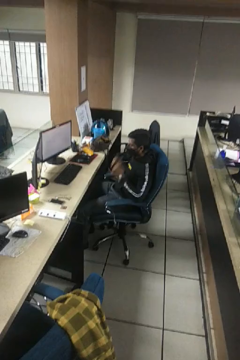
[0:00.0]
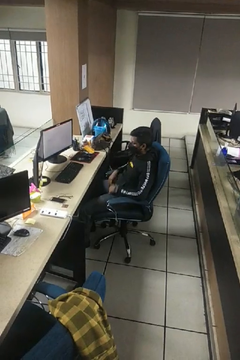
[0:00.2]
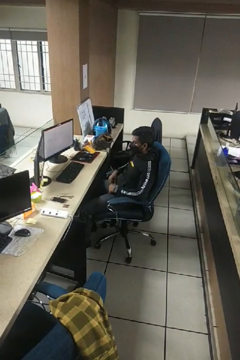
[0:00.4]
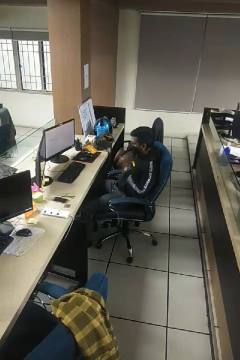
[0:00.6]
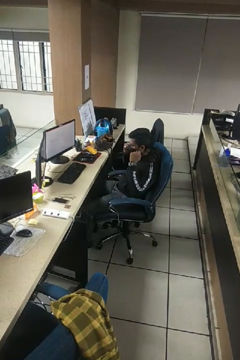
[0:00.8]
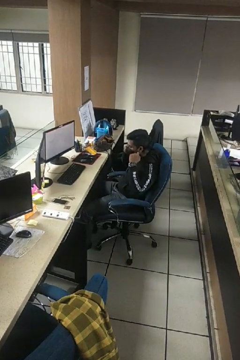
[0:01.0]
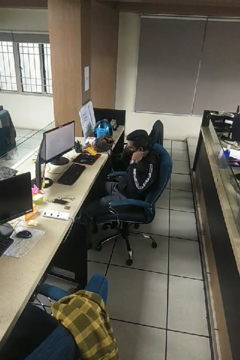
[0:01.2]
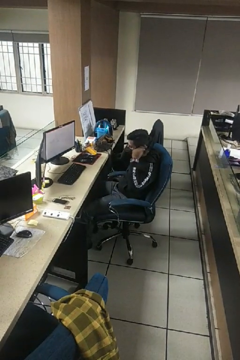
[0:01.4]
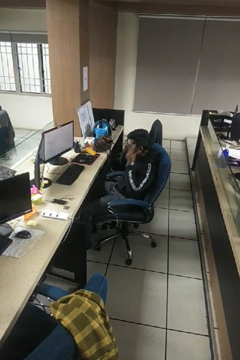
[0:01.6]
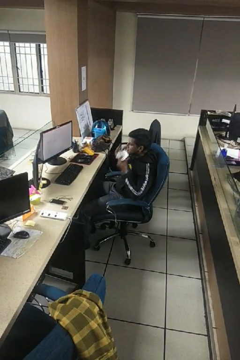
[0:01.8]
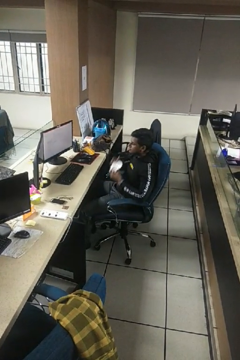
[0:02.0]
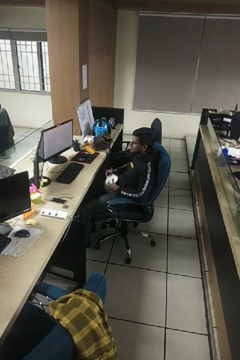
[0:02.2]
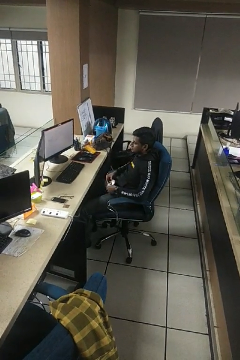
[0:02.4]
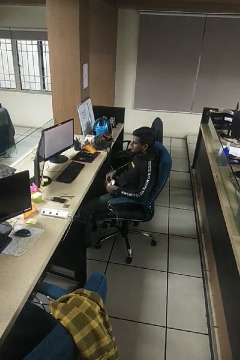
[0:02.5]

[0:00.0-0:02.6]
person takes off facemask

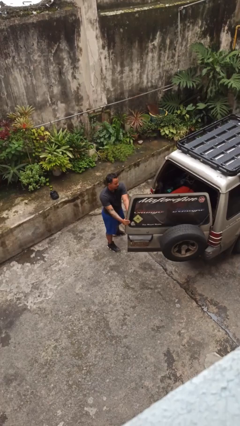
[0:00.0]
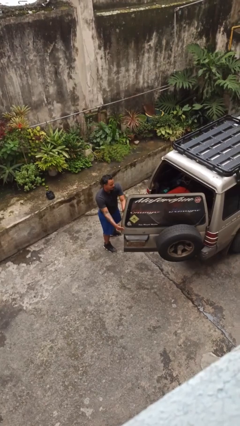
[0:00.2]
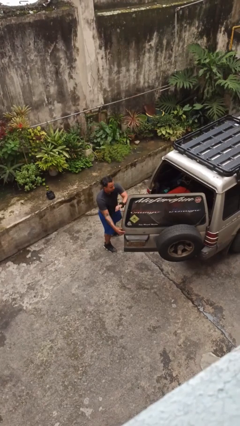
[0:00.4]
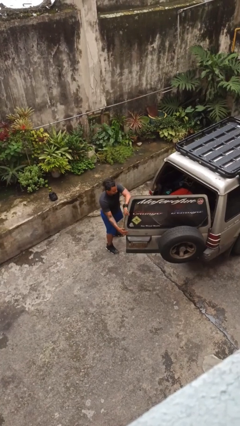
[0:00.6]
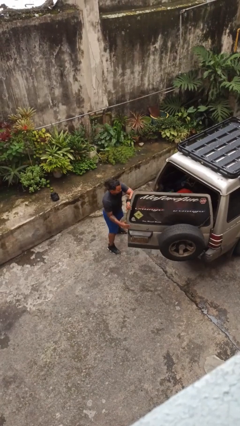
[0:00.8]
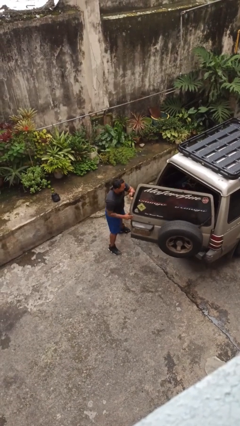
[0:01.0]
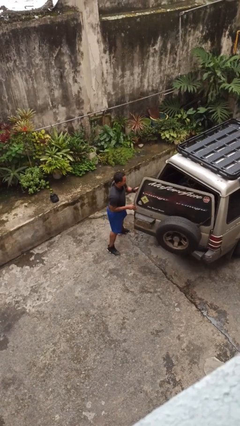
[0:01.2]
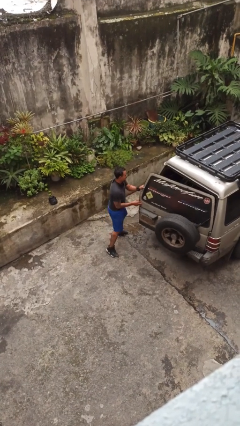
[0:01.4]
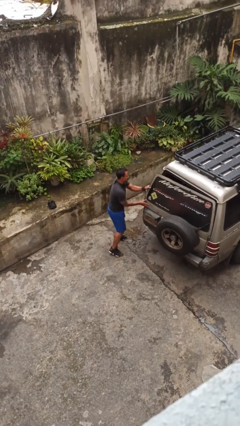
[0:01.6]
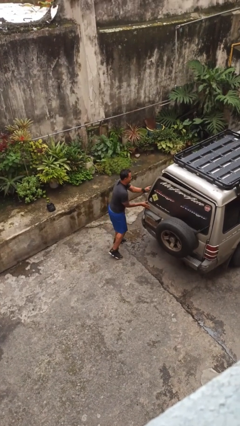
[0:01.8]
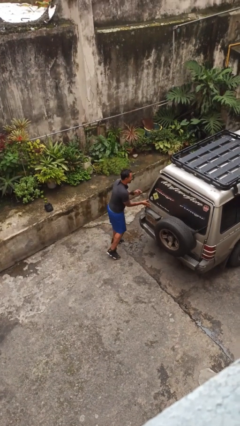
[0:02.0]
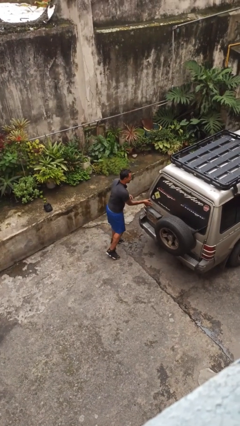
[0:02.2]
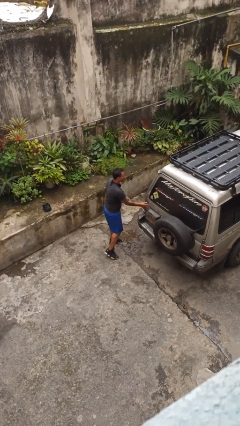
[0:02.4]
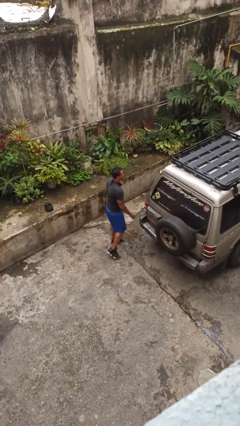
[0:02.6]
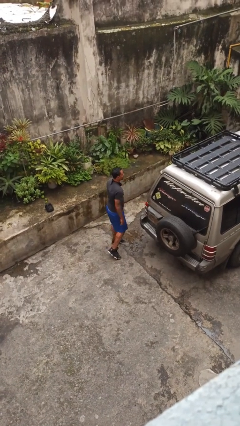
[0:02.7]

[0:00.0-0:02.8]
person closes car trunk

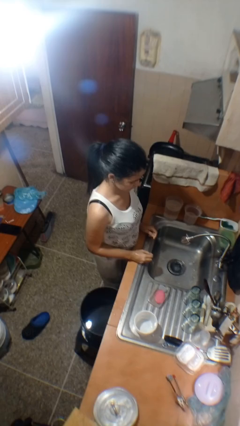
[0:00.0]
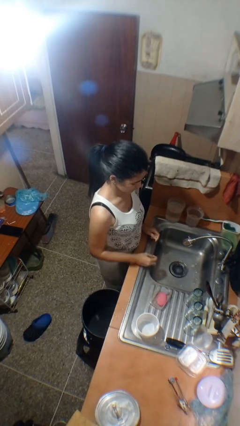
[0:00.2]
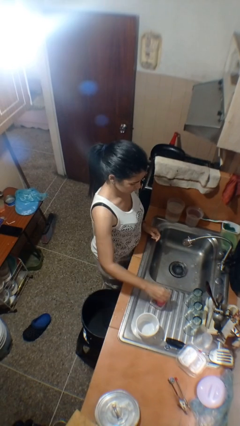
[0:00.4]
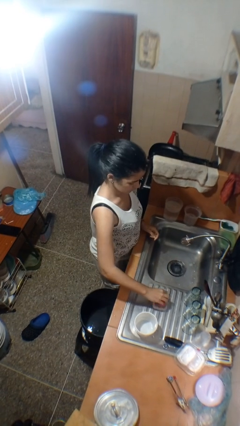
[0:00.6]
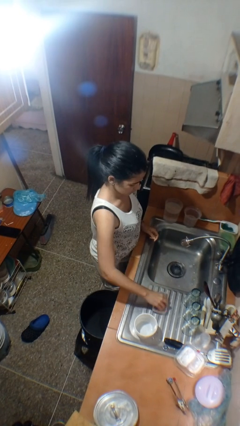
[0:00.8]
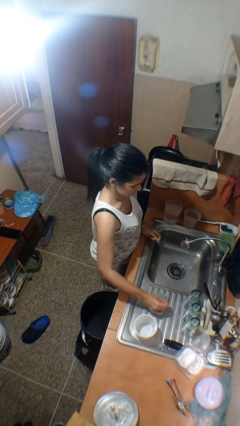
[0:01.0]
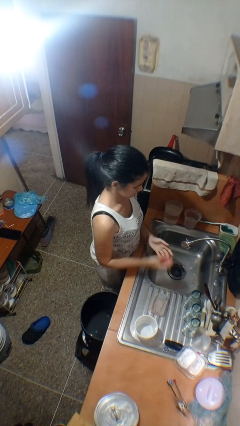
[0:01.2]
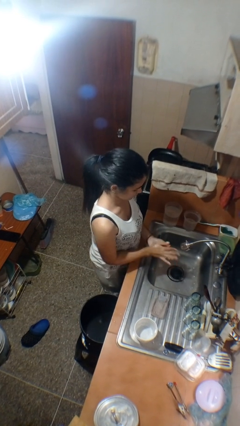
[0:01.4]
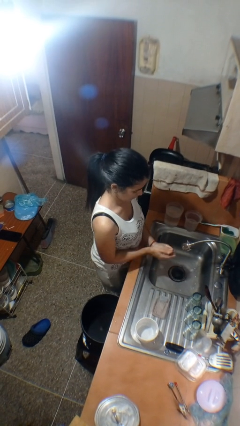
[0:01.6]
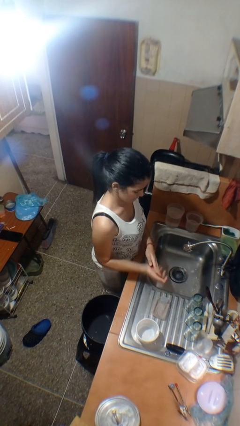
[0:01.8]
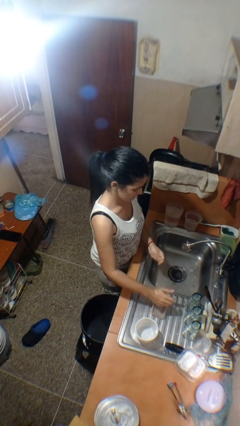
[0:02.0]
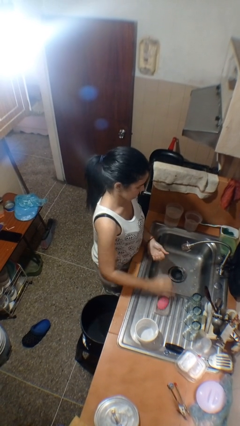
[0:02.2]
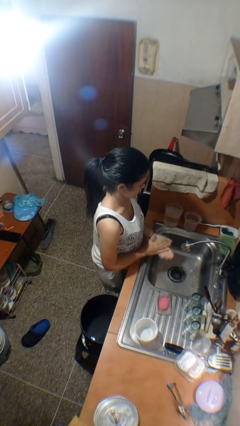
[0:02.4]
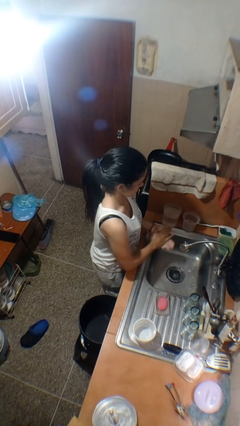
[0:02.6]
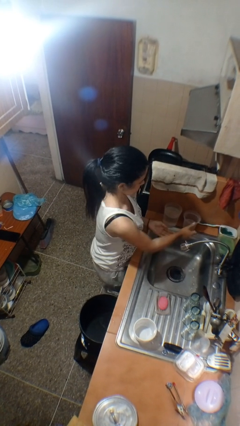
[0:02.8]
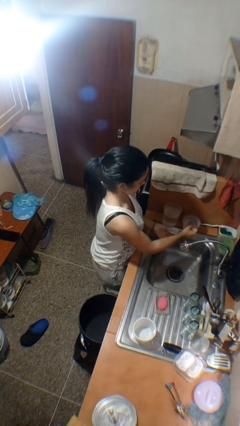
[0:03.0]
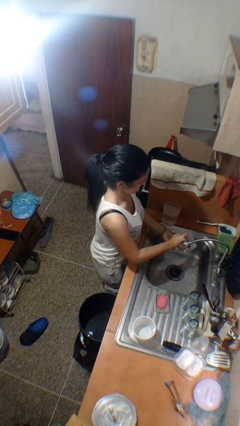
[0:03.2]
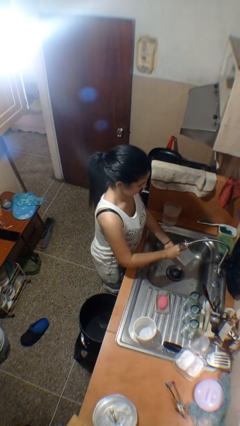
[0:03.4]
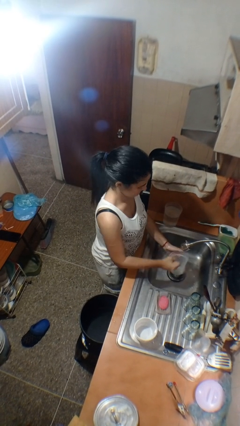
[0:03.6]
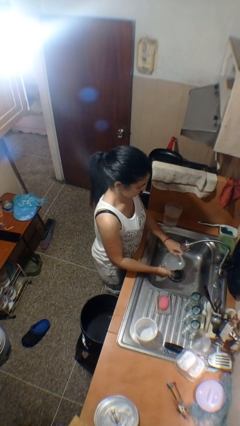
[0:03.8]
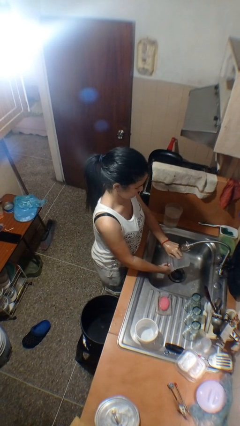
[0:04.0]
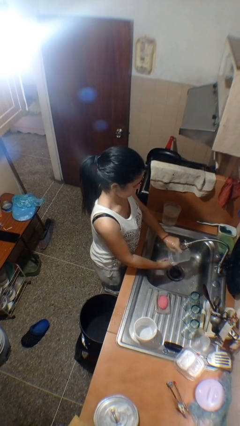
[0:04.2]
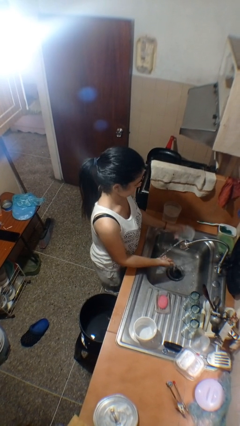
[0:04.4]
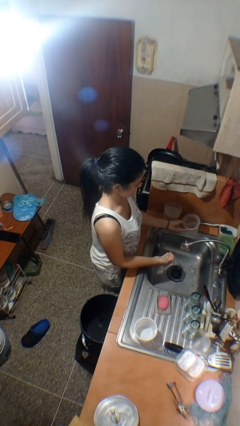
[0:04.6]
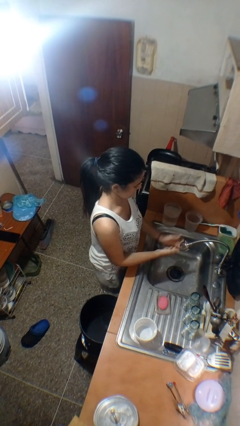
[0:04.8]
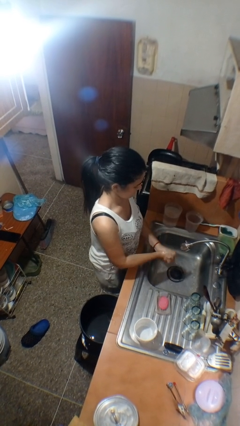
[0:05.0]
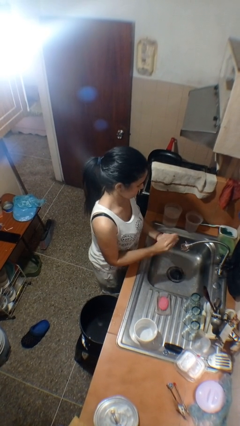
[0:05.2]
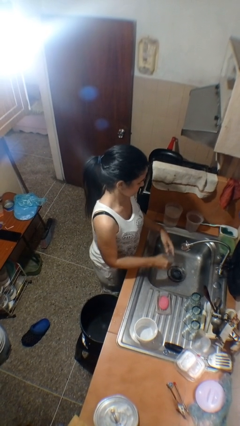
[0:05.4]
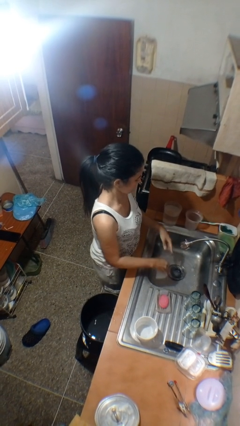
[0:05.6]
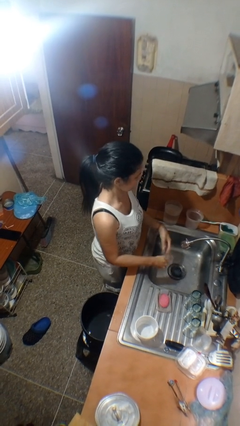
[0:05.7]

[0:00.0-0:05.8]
person washes hands

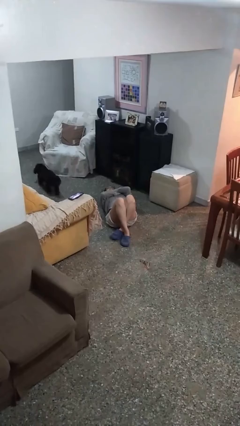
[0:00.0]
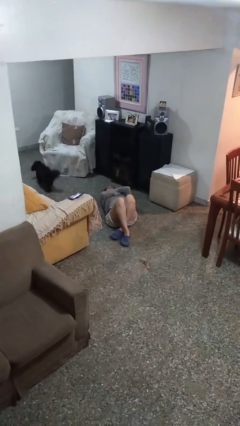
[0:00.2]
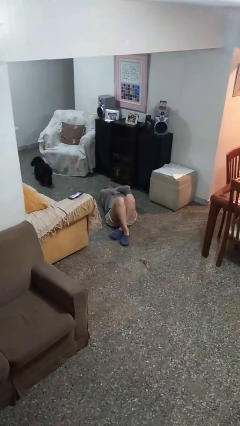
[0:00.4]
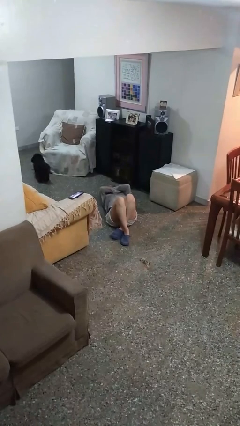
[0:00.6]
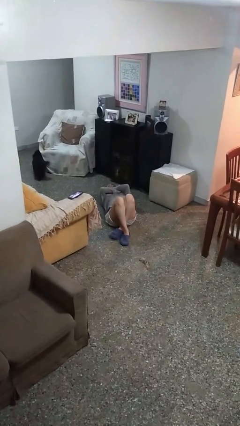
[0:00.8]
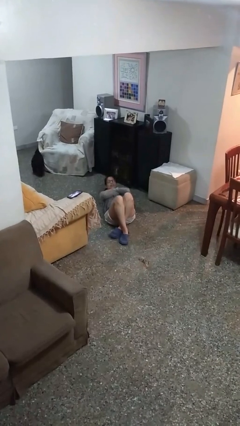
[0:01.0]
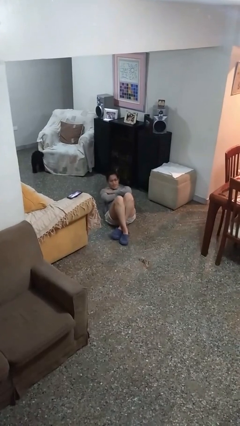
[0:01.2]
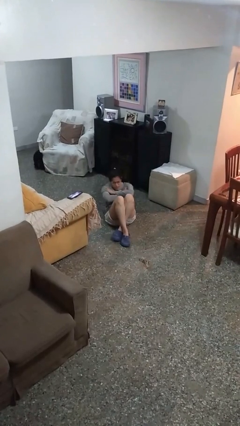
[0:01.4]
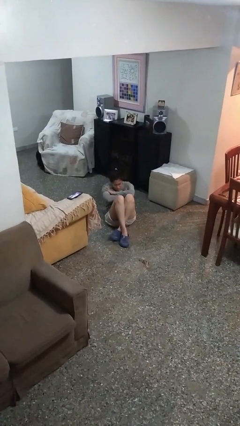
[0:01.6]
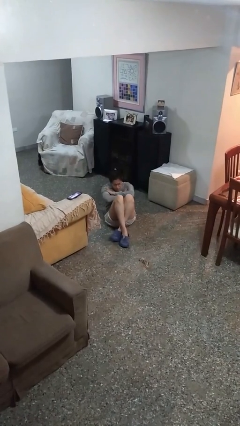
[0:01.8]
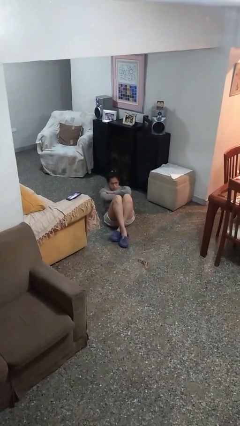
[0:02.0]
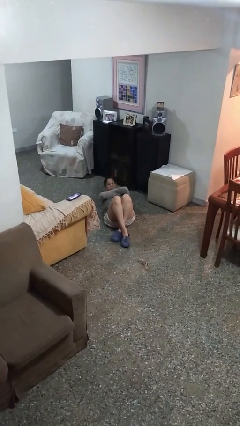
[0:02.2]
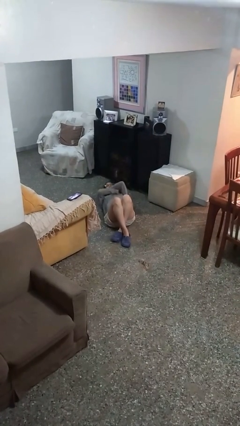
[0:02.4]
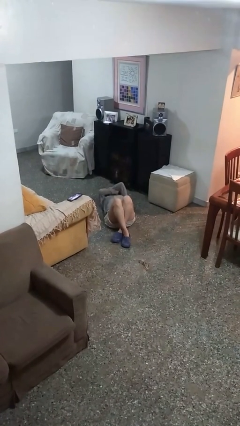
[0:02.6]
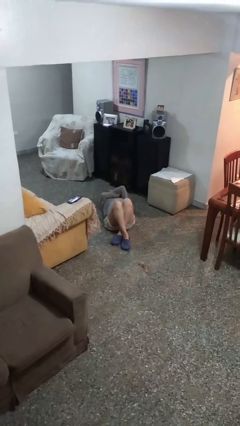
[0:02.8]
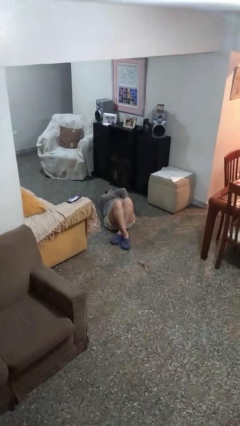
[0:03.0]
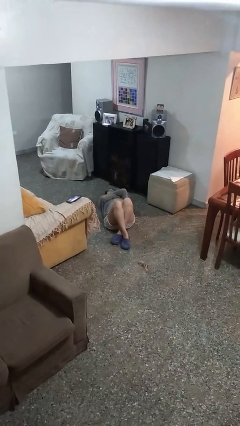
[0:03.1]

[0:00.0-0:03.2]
person exercises with situp

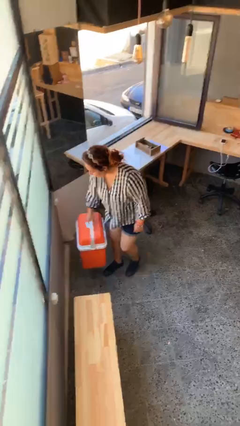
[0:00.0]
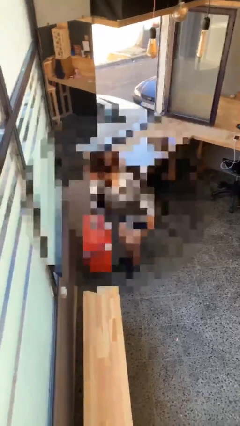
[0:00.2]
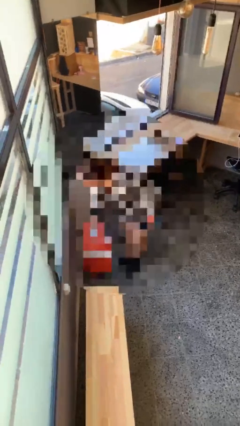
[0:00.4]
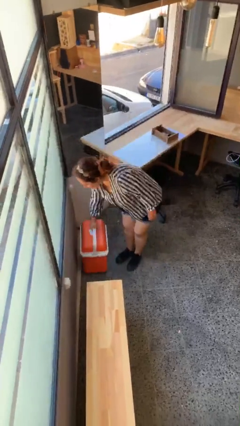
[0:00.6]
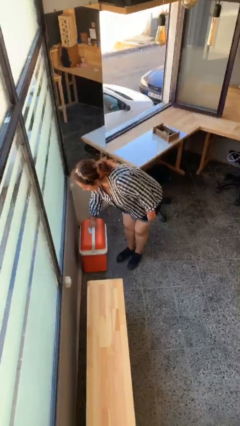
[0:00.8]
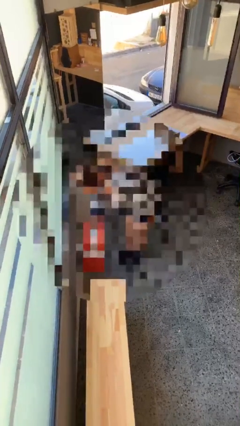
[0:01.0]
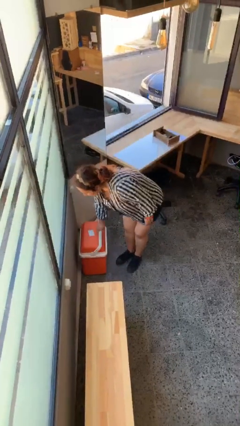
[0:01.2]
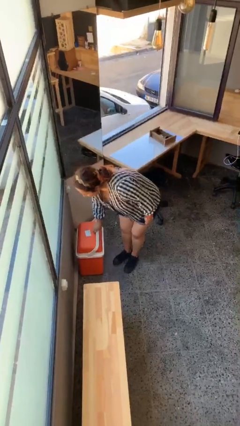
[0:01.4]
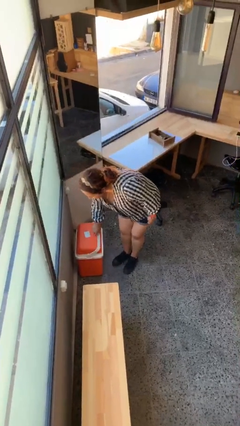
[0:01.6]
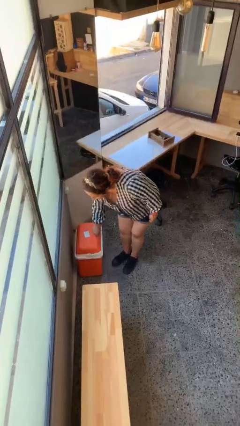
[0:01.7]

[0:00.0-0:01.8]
person puts down object on floor

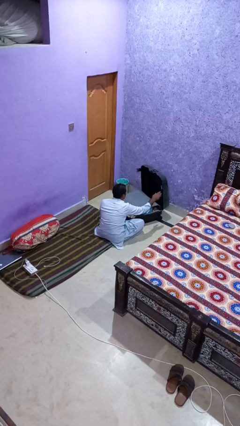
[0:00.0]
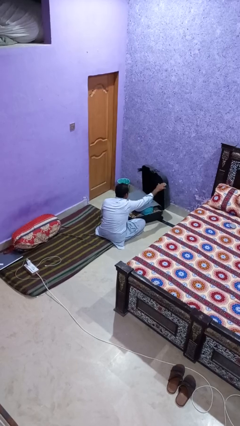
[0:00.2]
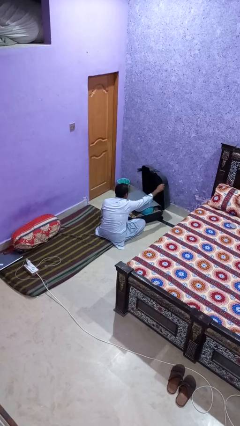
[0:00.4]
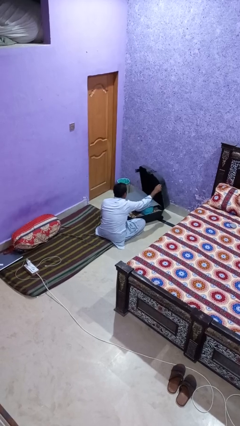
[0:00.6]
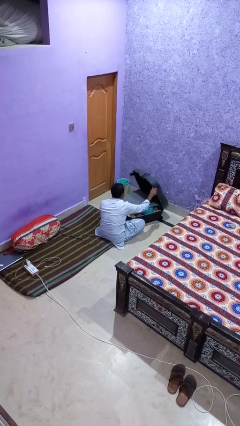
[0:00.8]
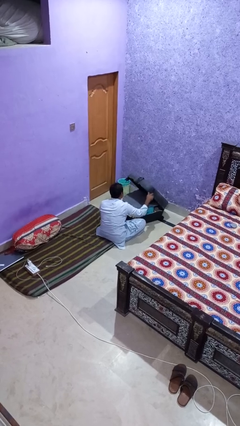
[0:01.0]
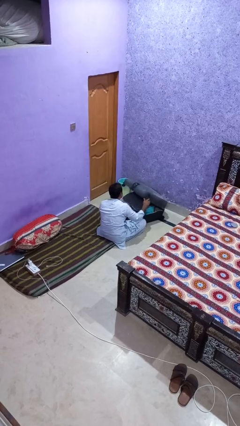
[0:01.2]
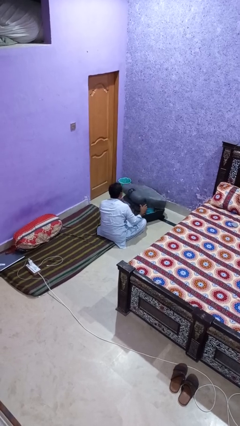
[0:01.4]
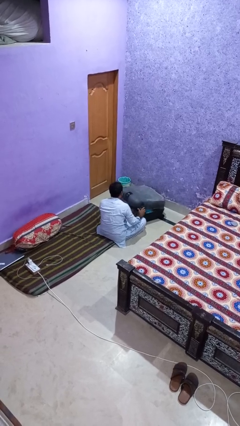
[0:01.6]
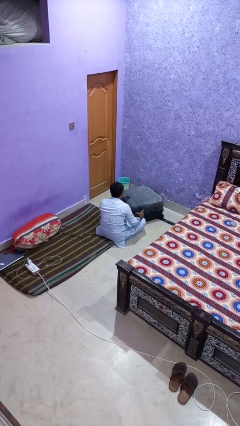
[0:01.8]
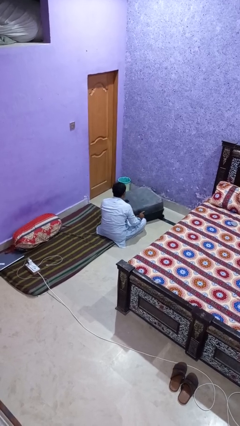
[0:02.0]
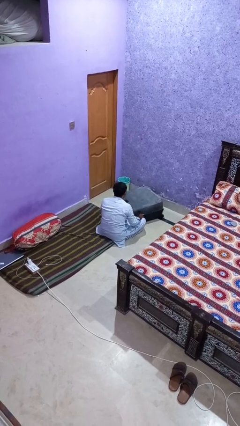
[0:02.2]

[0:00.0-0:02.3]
person closes suitcase
